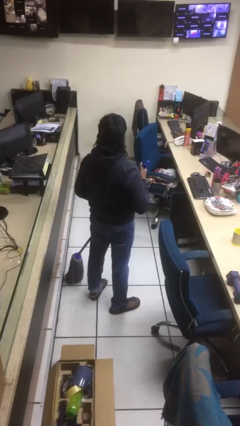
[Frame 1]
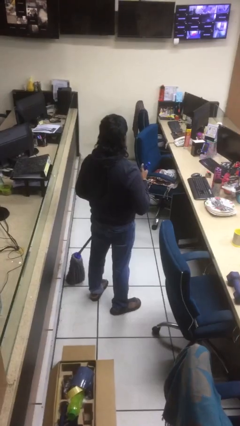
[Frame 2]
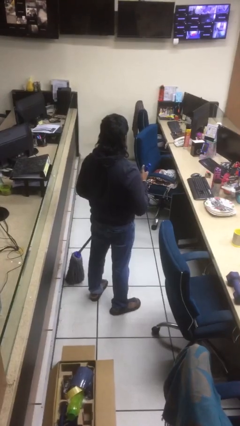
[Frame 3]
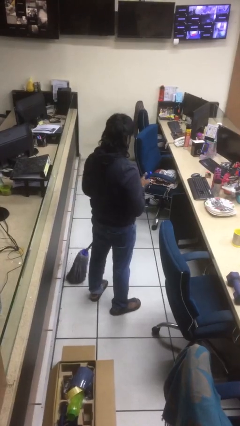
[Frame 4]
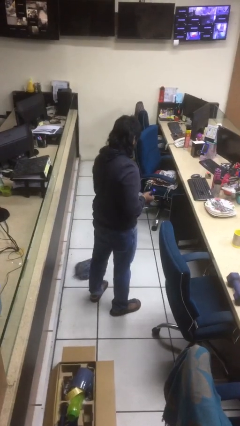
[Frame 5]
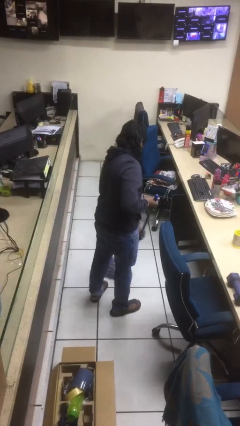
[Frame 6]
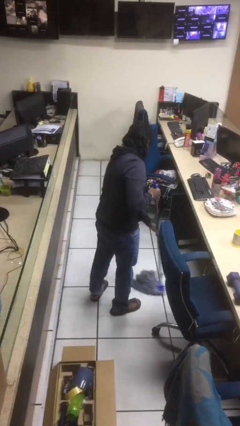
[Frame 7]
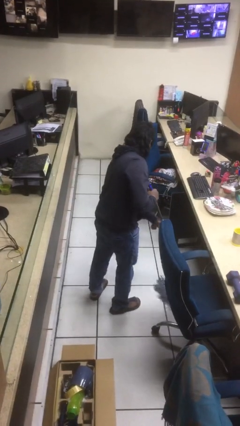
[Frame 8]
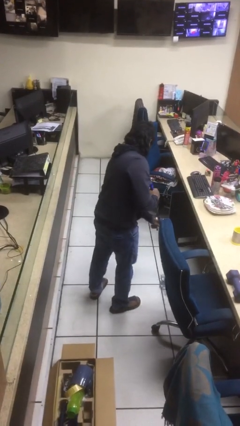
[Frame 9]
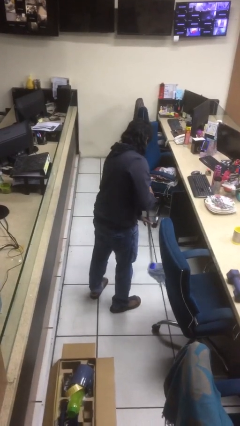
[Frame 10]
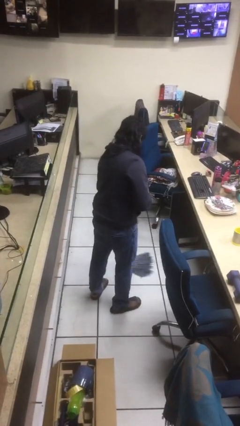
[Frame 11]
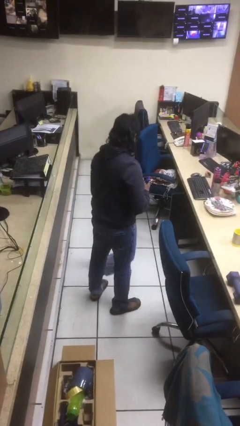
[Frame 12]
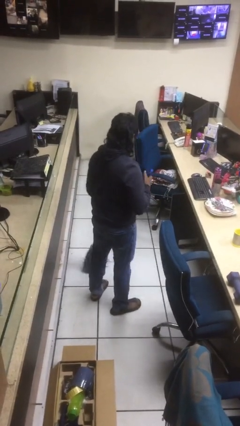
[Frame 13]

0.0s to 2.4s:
person mops

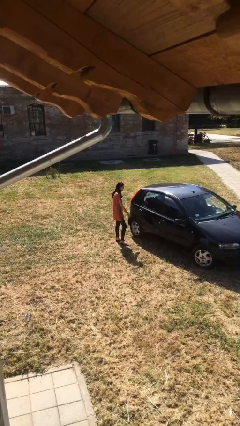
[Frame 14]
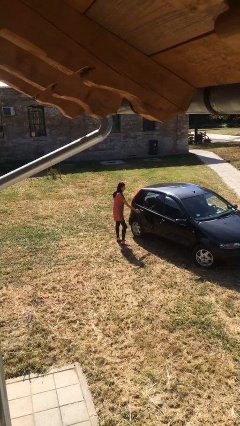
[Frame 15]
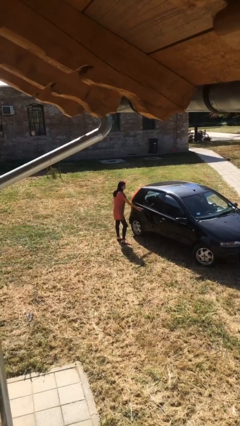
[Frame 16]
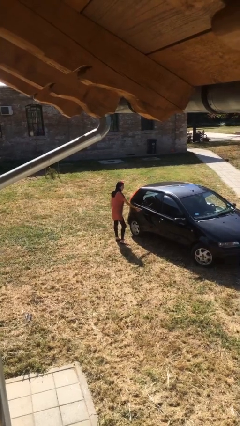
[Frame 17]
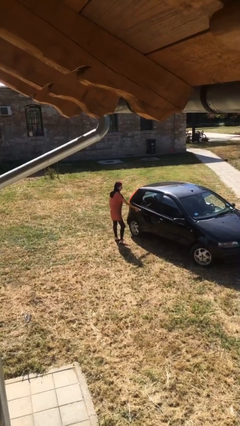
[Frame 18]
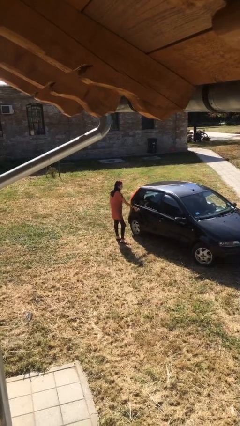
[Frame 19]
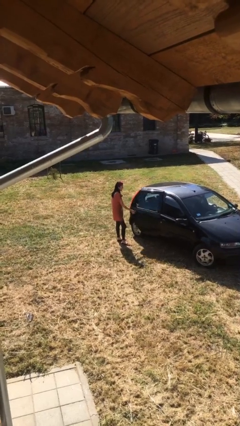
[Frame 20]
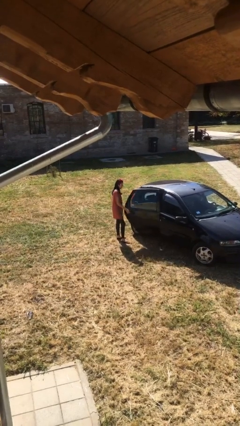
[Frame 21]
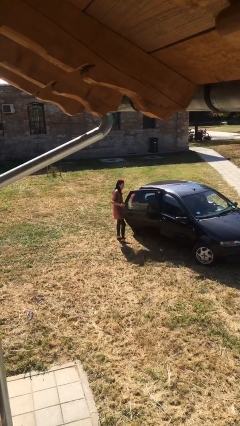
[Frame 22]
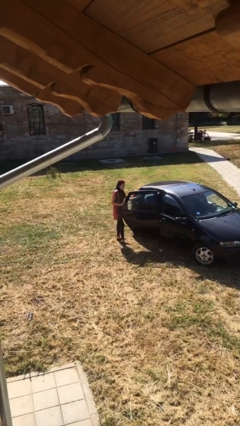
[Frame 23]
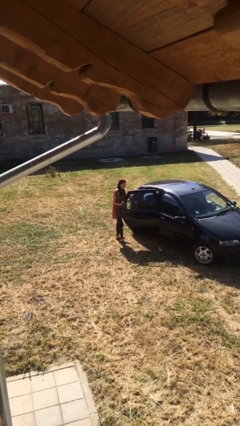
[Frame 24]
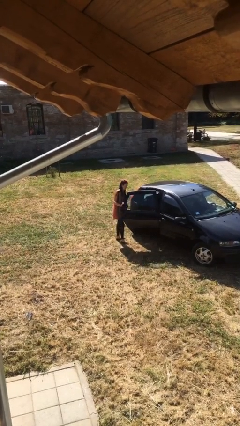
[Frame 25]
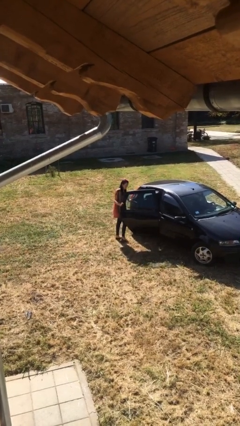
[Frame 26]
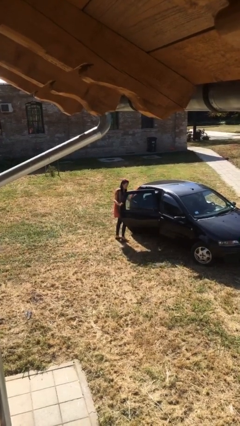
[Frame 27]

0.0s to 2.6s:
person opens car door

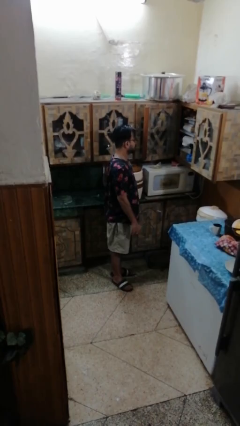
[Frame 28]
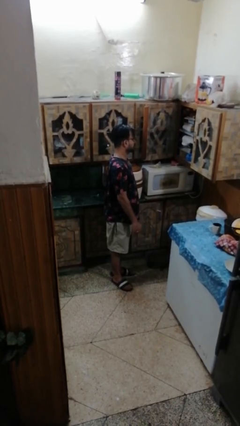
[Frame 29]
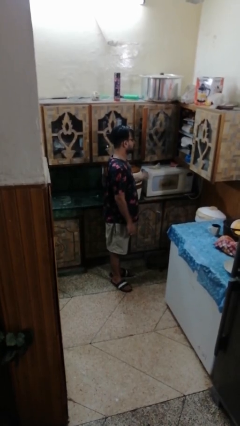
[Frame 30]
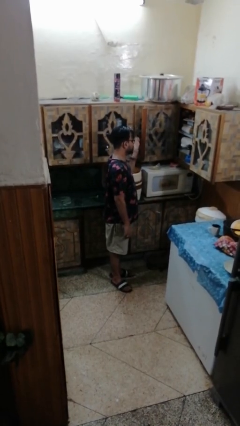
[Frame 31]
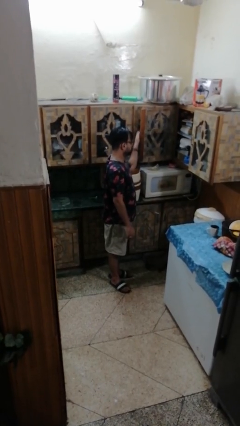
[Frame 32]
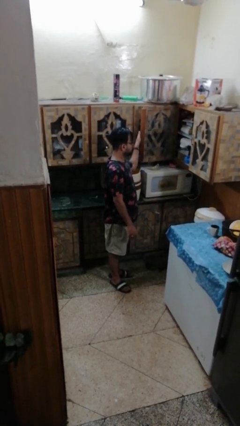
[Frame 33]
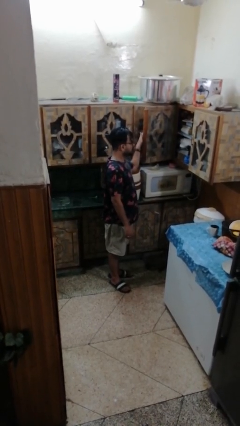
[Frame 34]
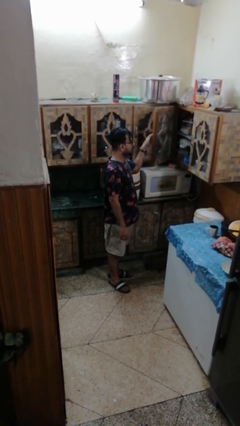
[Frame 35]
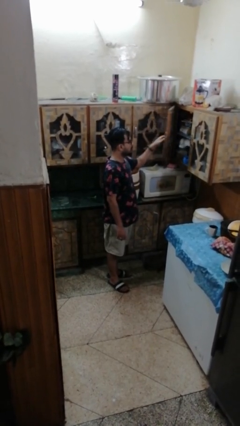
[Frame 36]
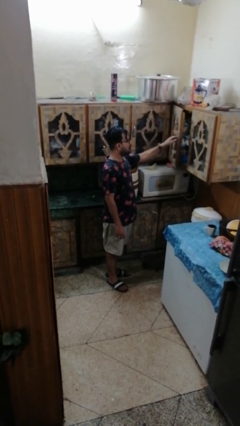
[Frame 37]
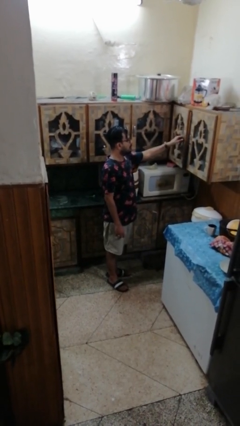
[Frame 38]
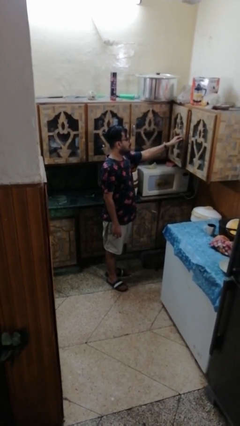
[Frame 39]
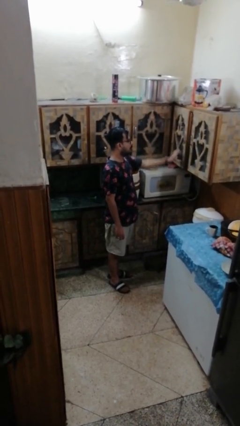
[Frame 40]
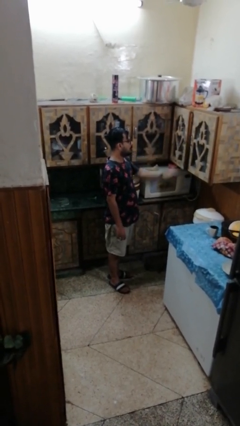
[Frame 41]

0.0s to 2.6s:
person closes cabinet

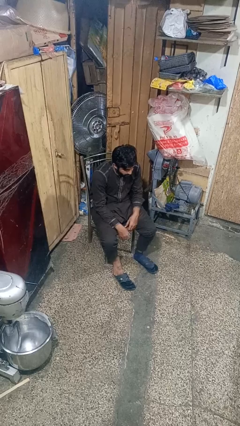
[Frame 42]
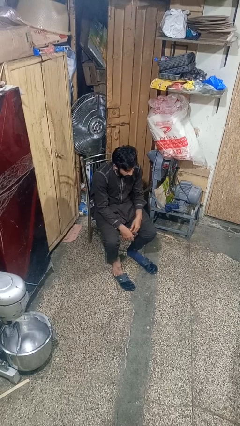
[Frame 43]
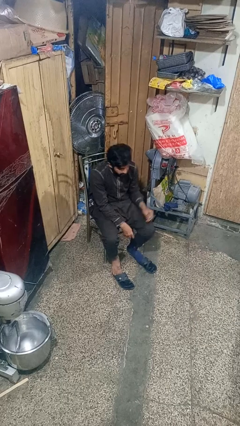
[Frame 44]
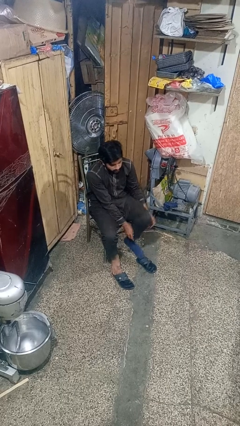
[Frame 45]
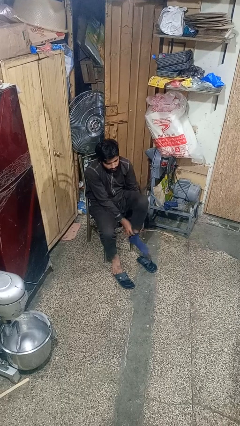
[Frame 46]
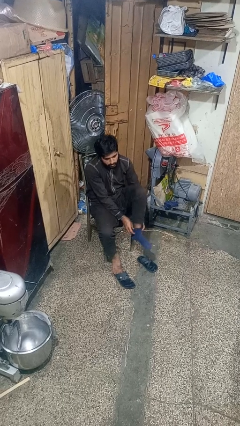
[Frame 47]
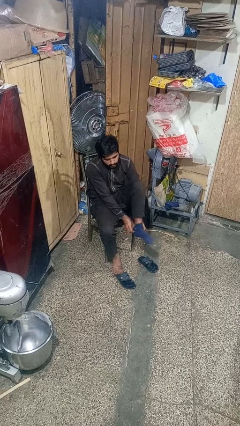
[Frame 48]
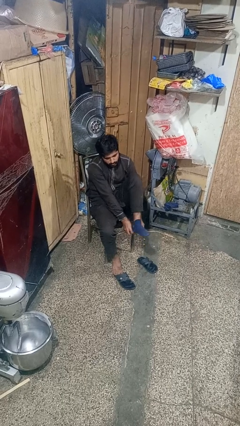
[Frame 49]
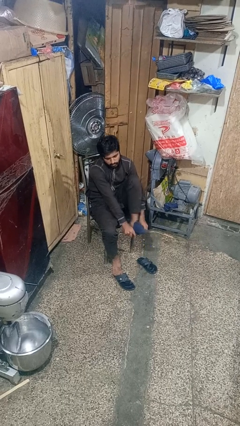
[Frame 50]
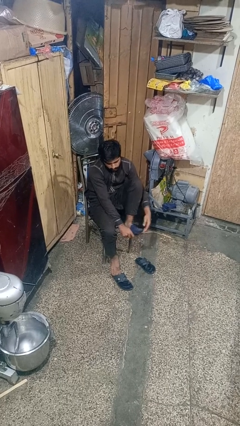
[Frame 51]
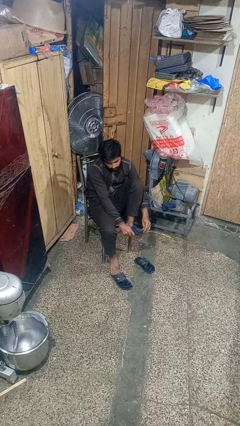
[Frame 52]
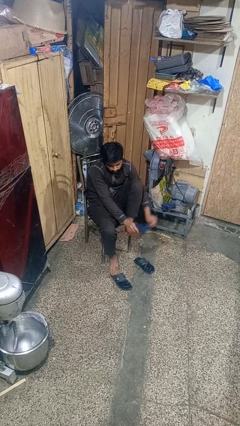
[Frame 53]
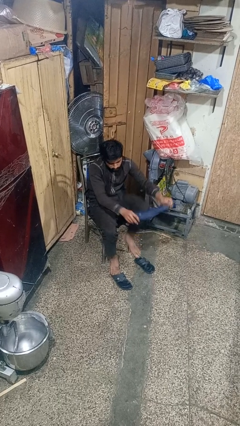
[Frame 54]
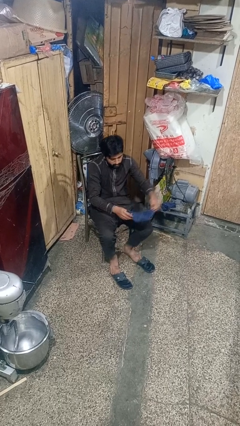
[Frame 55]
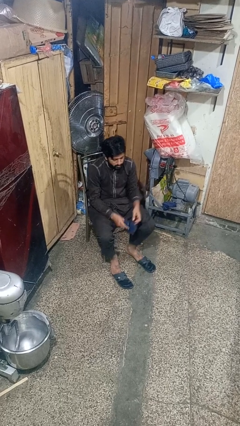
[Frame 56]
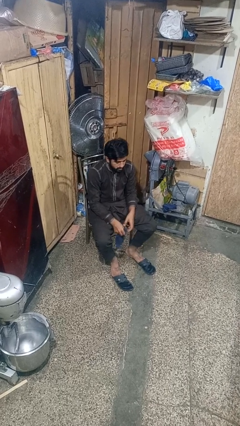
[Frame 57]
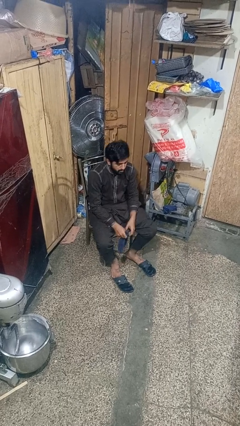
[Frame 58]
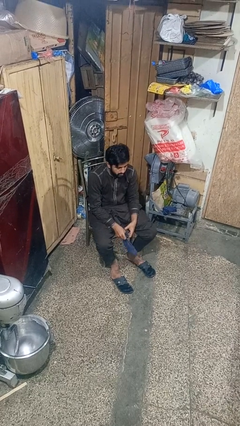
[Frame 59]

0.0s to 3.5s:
person takes off socks

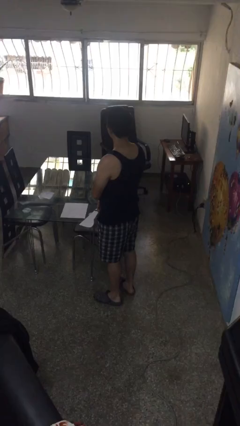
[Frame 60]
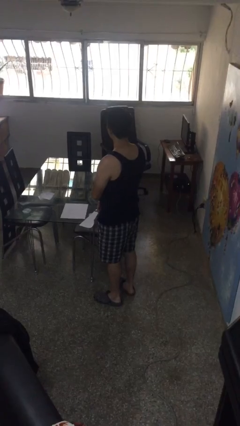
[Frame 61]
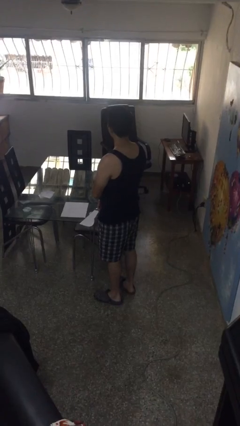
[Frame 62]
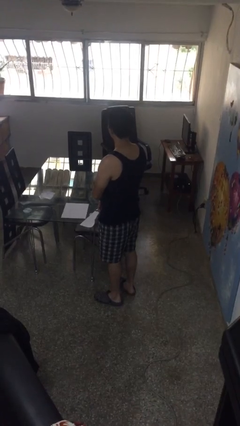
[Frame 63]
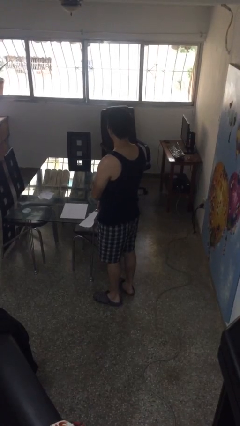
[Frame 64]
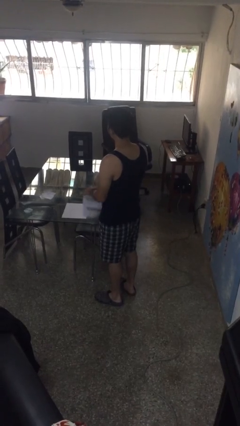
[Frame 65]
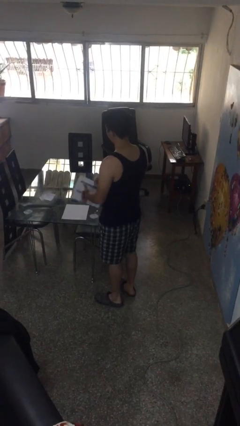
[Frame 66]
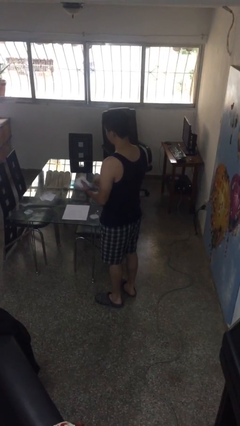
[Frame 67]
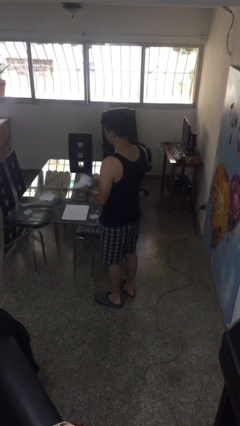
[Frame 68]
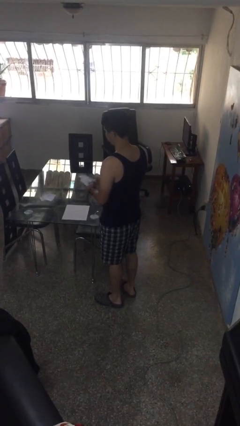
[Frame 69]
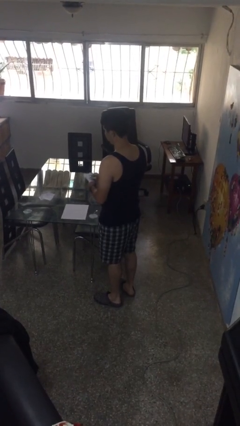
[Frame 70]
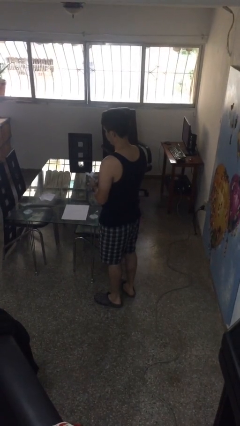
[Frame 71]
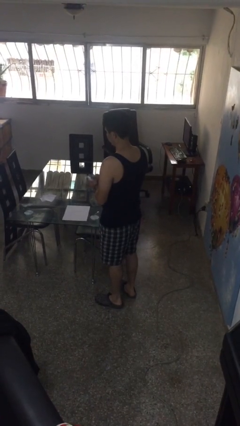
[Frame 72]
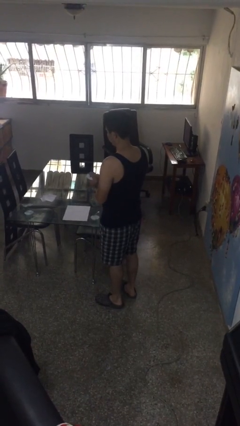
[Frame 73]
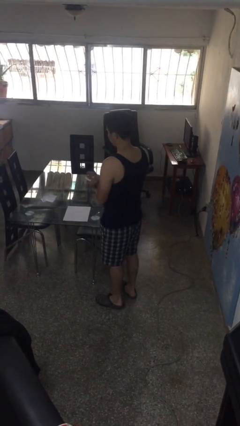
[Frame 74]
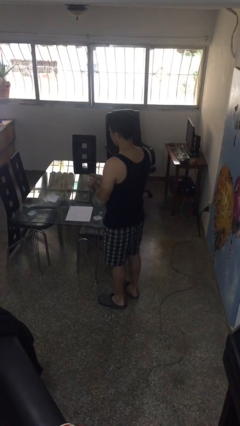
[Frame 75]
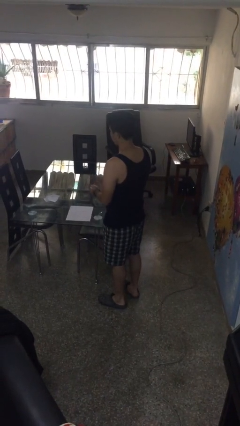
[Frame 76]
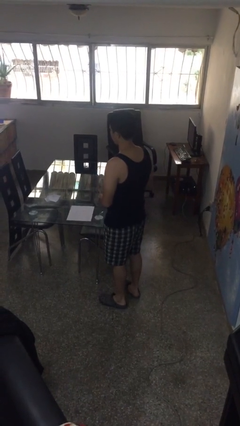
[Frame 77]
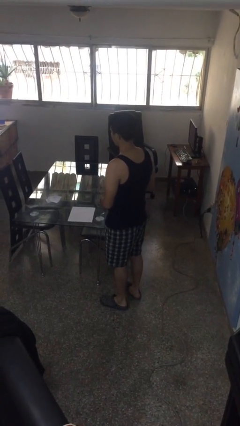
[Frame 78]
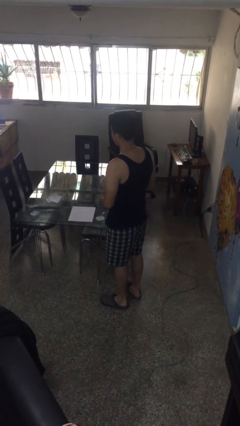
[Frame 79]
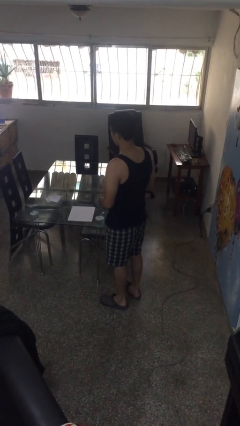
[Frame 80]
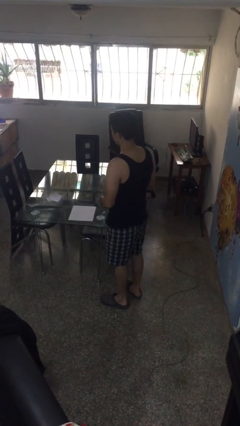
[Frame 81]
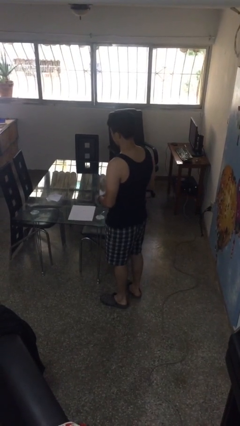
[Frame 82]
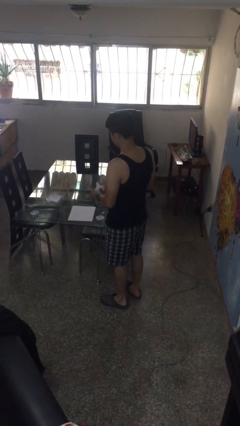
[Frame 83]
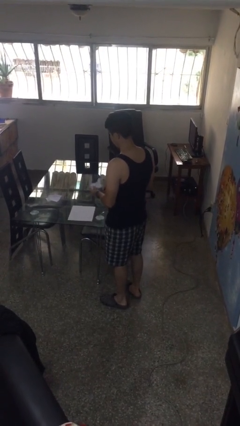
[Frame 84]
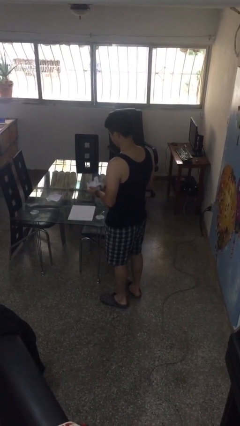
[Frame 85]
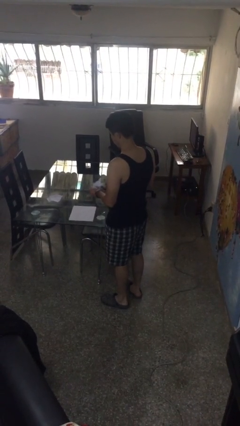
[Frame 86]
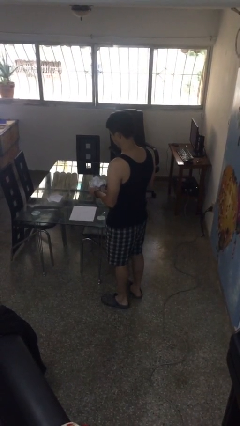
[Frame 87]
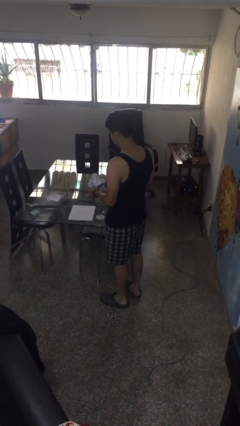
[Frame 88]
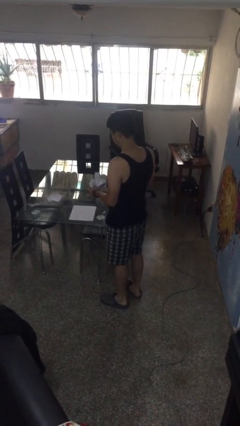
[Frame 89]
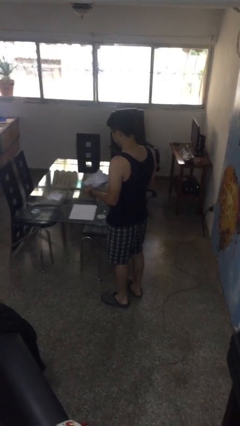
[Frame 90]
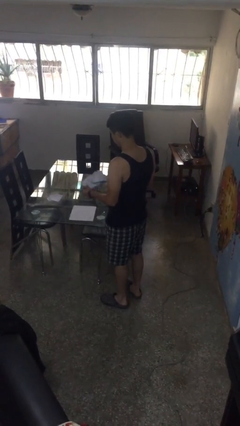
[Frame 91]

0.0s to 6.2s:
person crumples paper

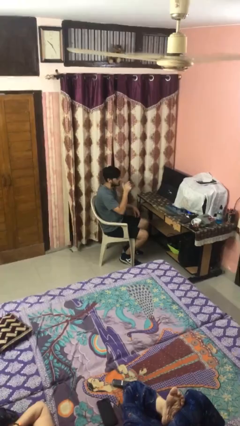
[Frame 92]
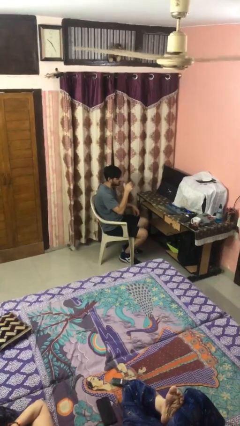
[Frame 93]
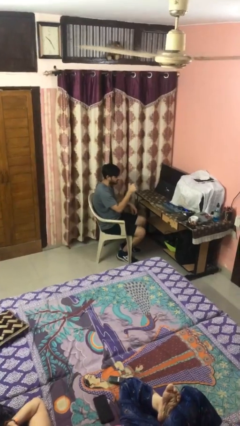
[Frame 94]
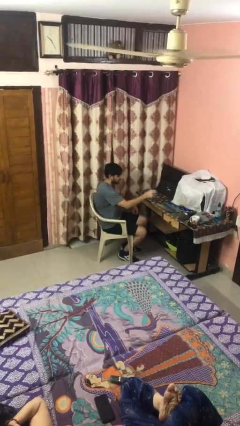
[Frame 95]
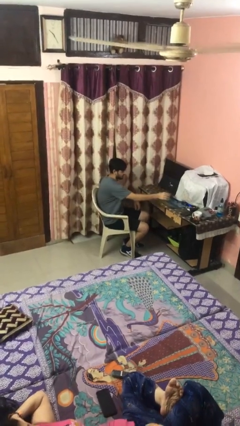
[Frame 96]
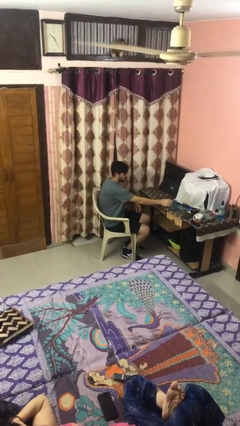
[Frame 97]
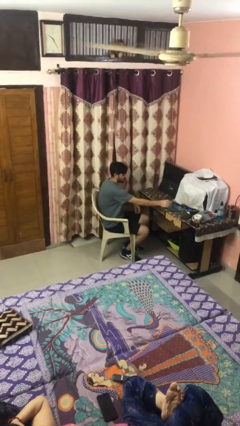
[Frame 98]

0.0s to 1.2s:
person puts down object on table
